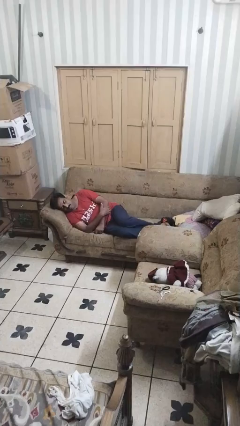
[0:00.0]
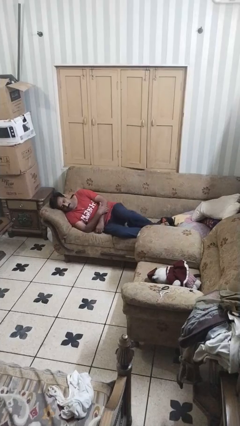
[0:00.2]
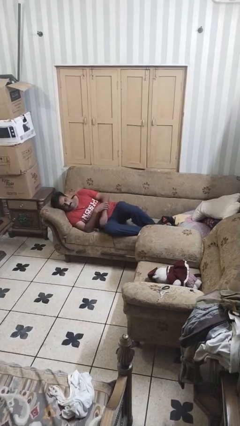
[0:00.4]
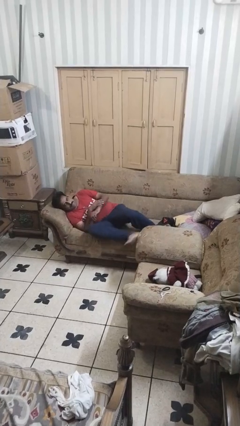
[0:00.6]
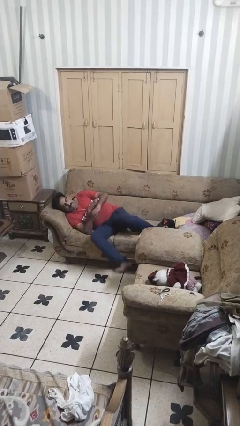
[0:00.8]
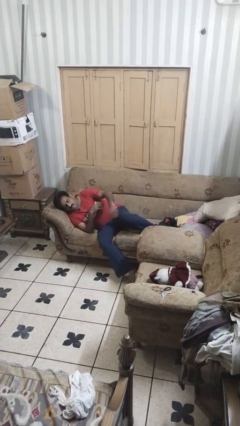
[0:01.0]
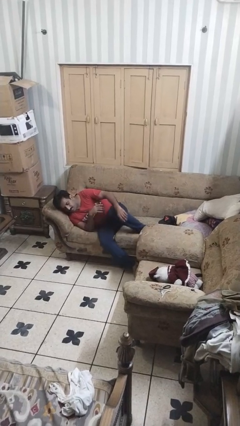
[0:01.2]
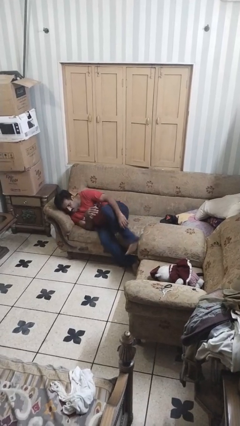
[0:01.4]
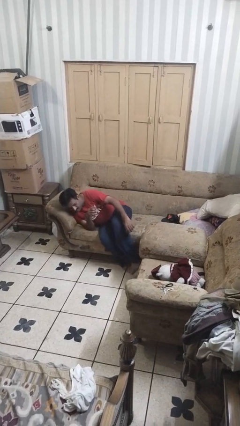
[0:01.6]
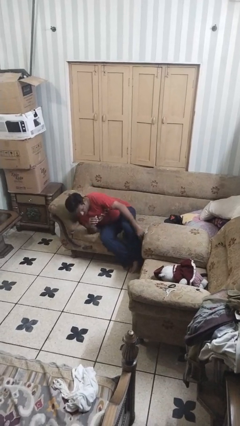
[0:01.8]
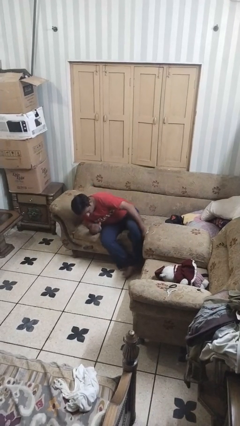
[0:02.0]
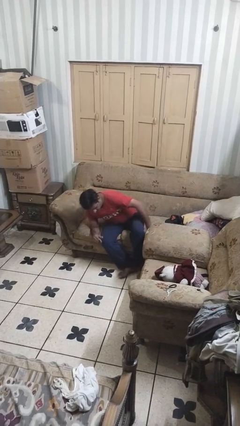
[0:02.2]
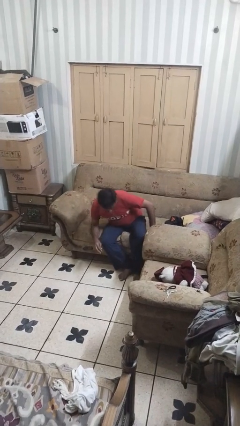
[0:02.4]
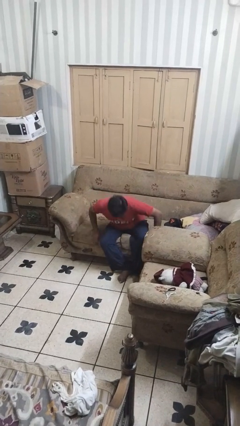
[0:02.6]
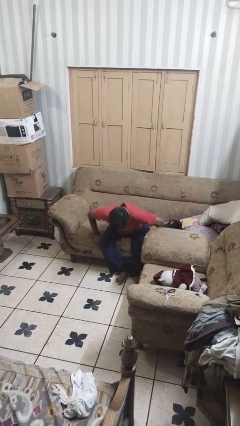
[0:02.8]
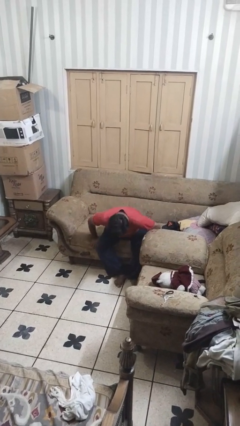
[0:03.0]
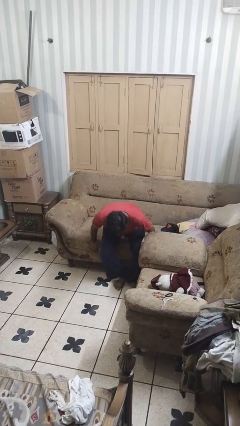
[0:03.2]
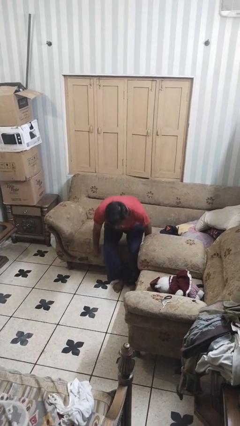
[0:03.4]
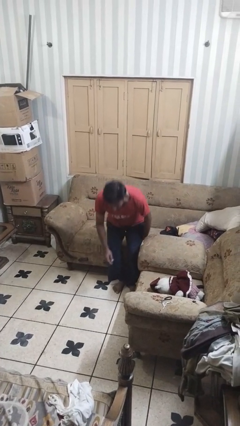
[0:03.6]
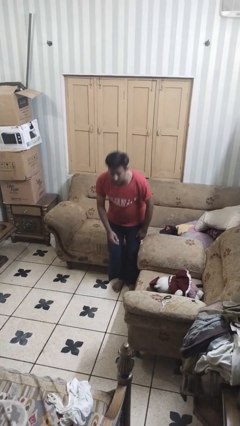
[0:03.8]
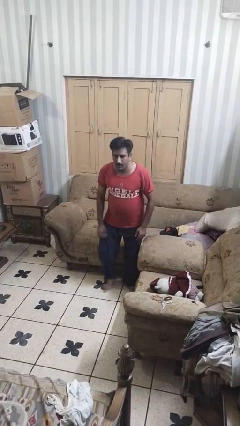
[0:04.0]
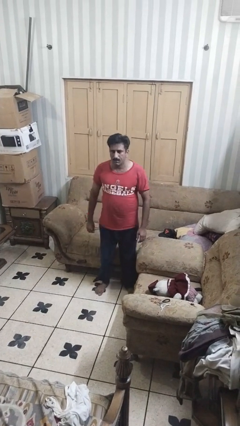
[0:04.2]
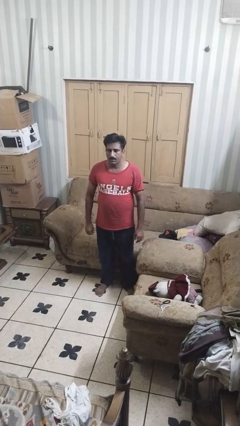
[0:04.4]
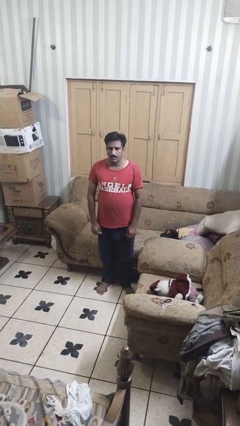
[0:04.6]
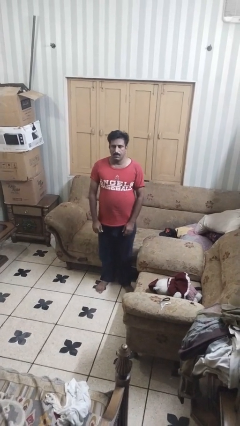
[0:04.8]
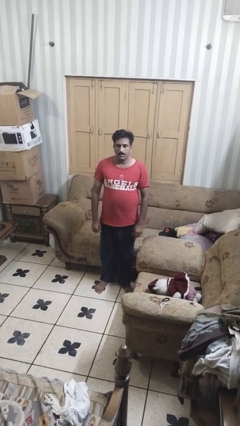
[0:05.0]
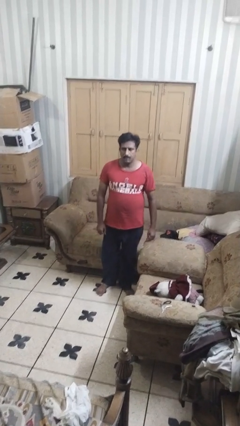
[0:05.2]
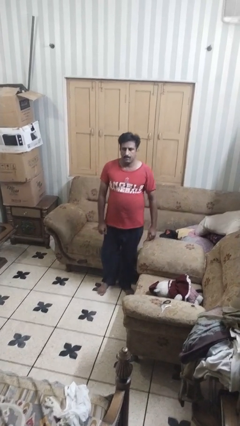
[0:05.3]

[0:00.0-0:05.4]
person stands up

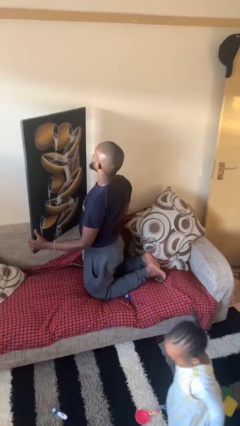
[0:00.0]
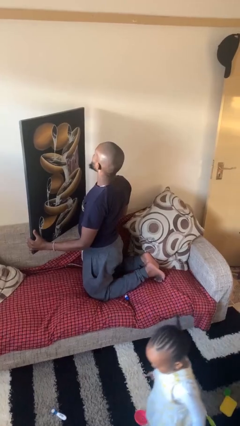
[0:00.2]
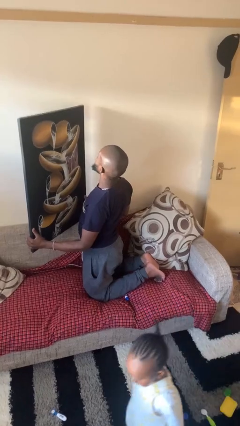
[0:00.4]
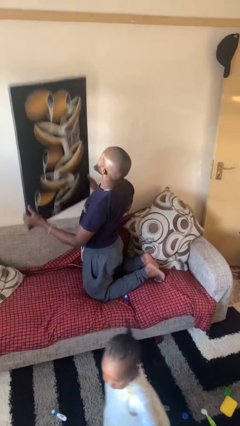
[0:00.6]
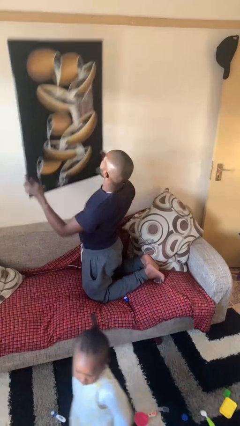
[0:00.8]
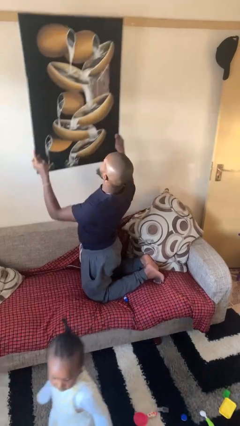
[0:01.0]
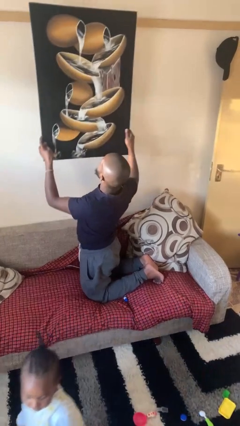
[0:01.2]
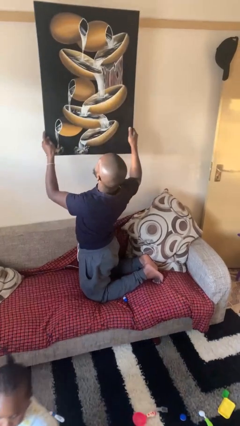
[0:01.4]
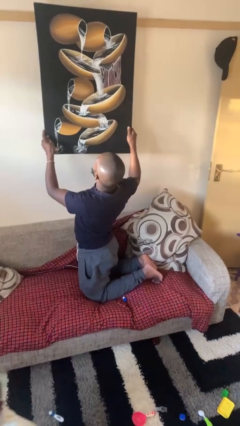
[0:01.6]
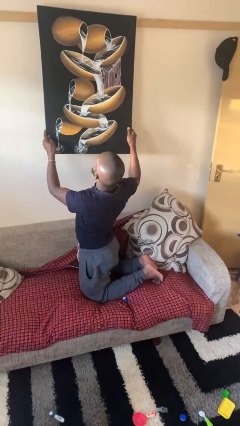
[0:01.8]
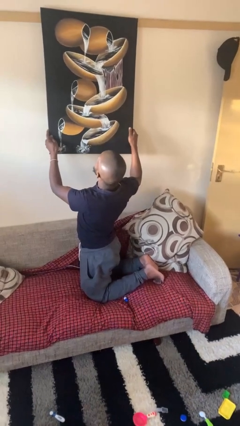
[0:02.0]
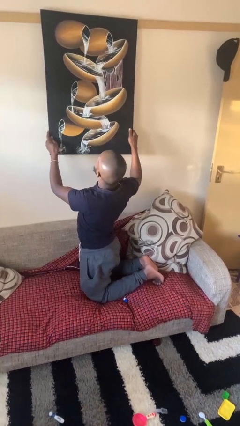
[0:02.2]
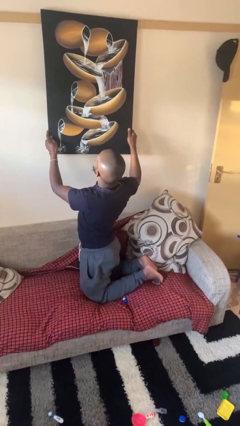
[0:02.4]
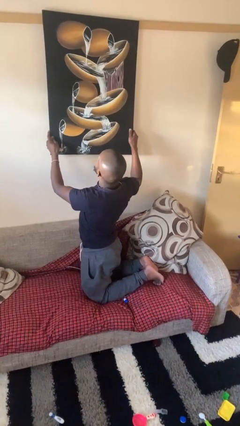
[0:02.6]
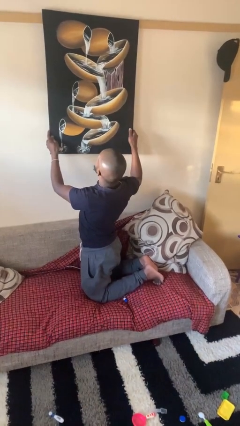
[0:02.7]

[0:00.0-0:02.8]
person puts up picture frame

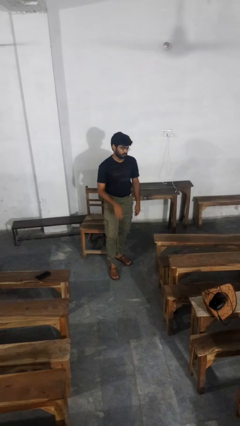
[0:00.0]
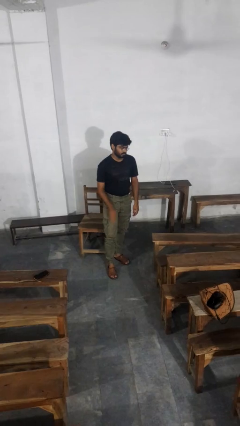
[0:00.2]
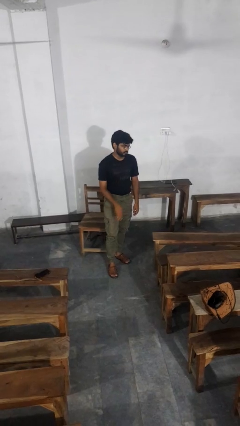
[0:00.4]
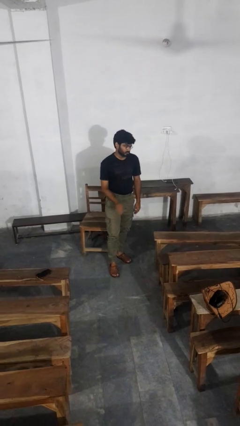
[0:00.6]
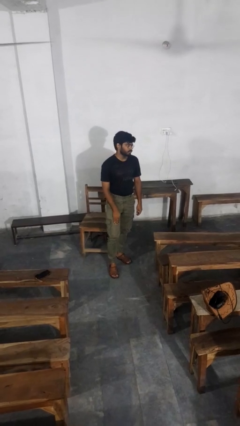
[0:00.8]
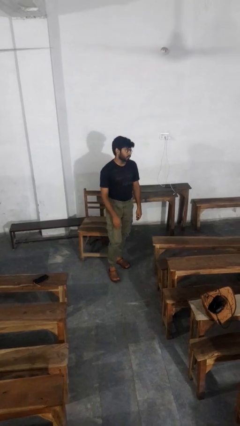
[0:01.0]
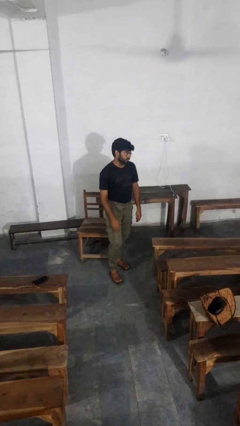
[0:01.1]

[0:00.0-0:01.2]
person slaps hands on thighs

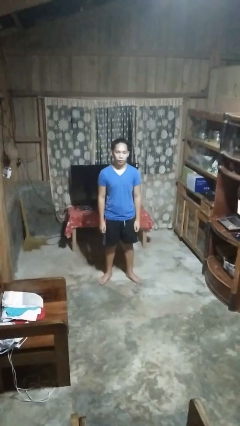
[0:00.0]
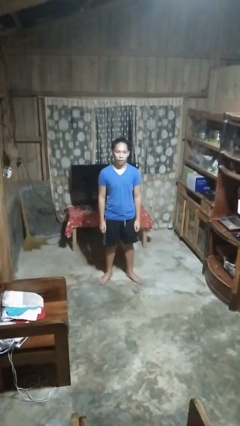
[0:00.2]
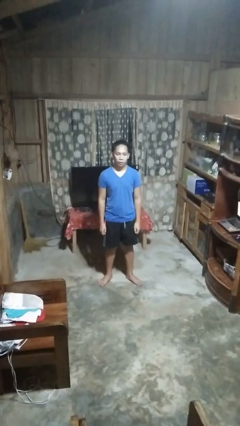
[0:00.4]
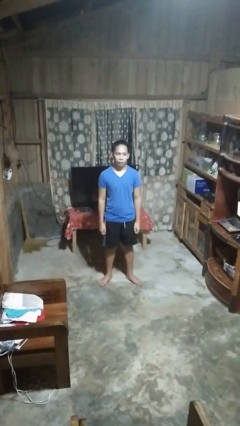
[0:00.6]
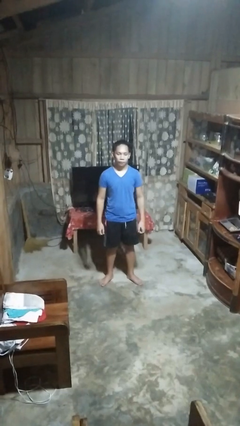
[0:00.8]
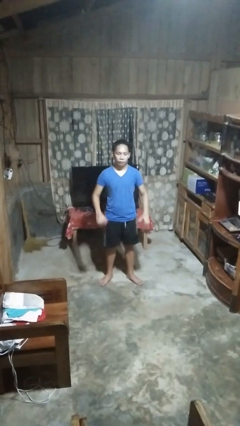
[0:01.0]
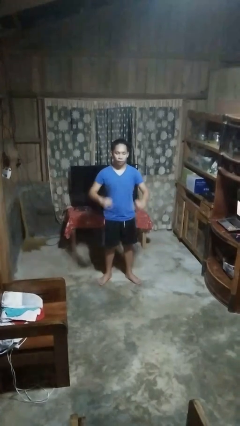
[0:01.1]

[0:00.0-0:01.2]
person gestures heart

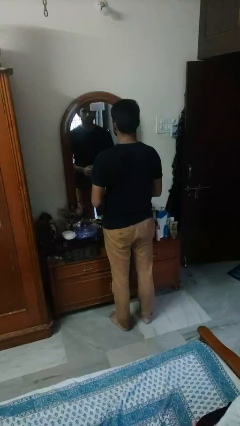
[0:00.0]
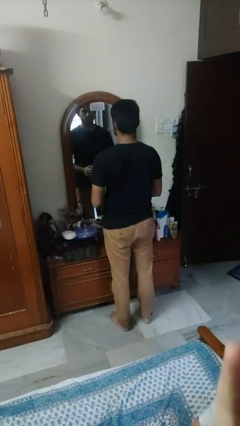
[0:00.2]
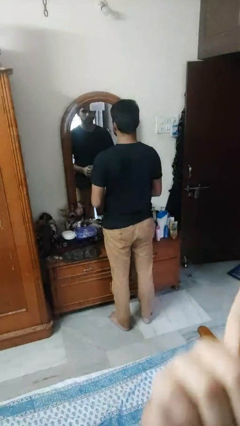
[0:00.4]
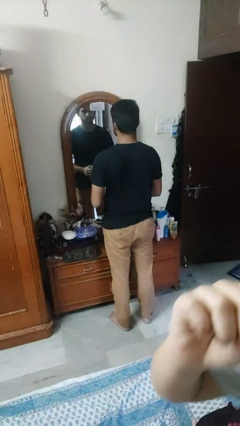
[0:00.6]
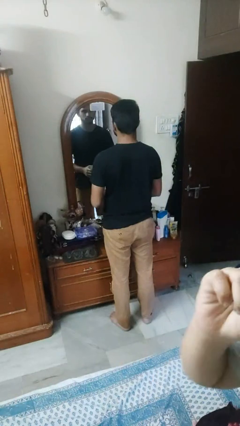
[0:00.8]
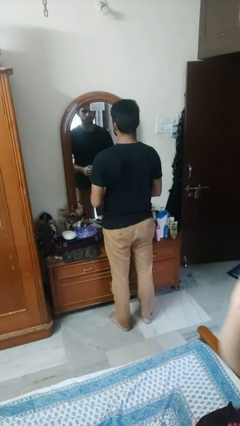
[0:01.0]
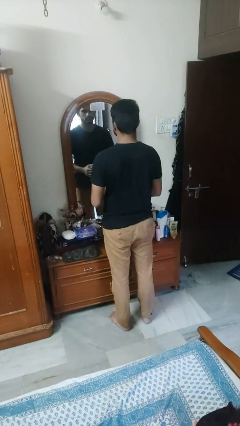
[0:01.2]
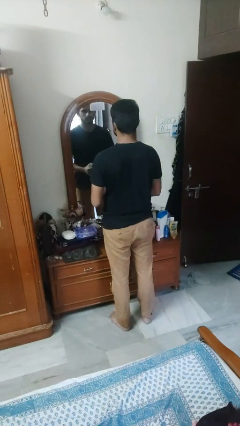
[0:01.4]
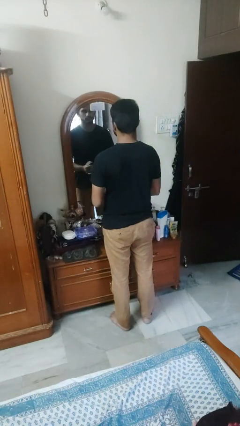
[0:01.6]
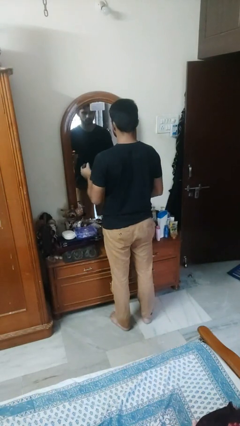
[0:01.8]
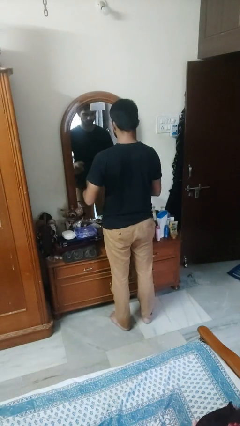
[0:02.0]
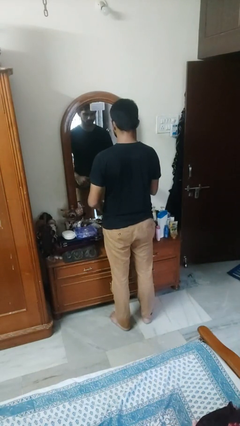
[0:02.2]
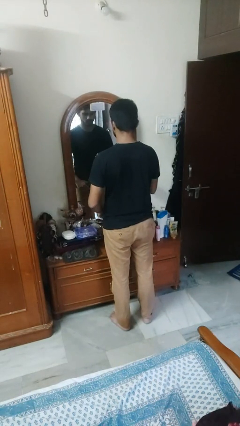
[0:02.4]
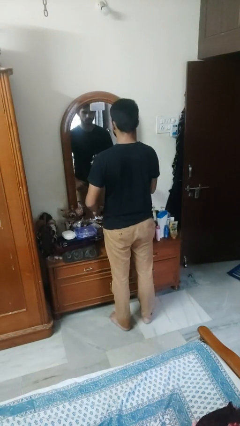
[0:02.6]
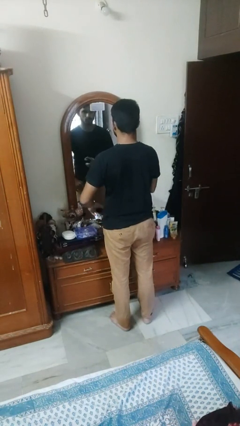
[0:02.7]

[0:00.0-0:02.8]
person applies deodorant

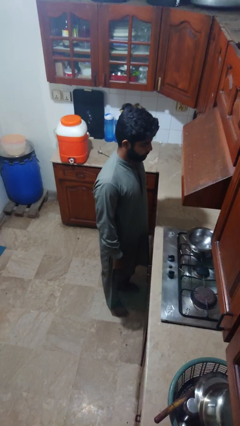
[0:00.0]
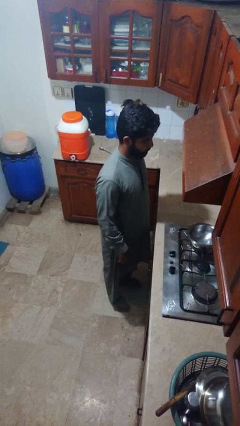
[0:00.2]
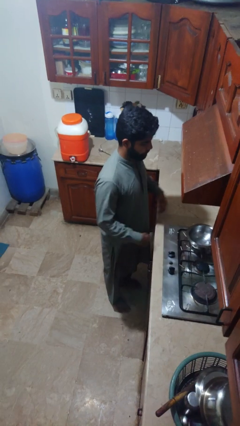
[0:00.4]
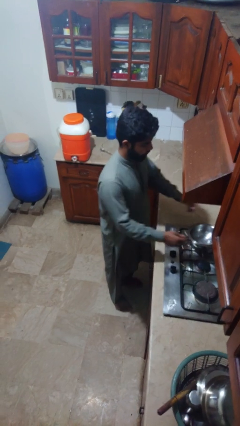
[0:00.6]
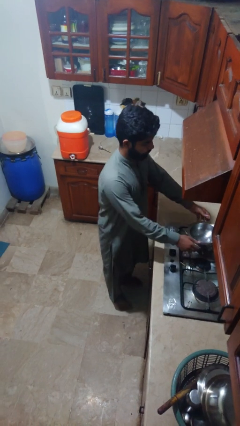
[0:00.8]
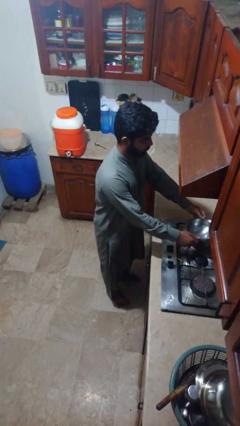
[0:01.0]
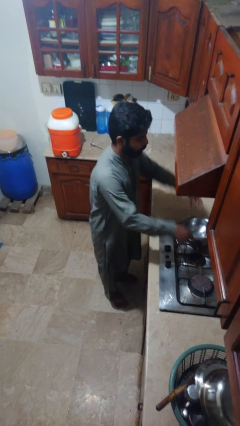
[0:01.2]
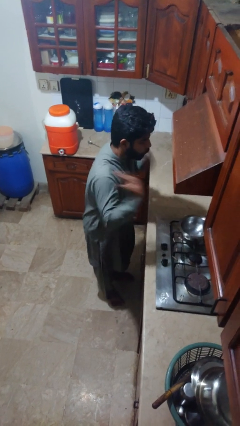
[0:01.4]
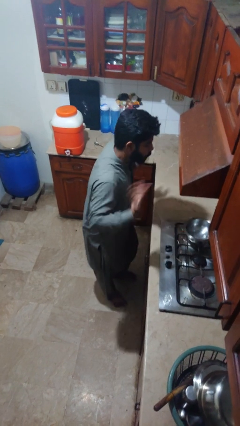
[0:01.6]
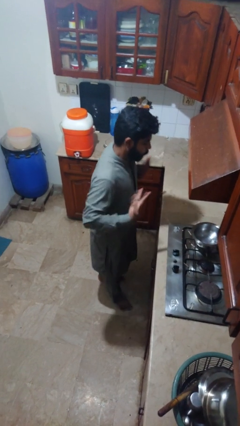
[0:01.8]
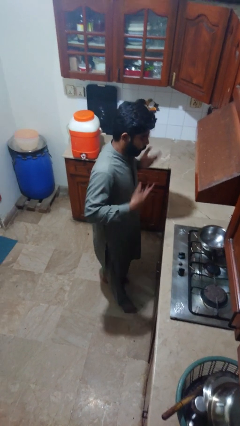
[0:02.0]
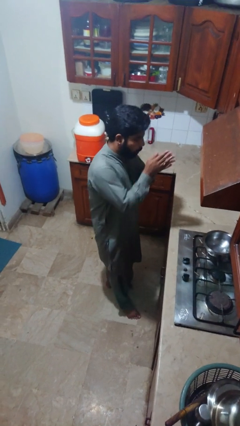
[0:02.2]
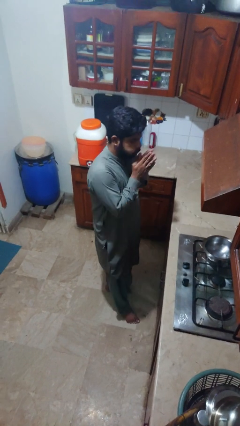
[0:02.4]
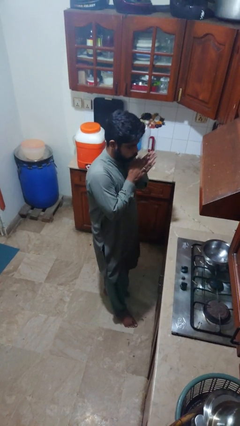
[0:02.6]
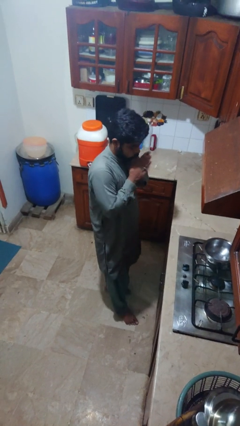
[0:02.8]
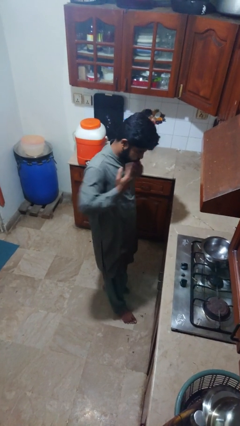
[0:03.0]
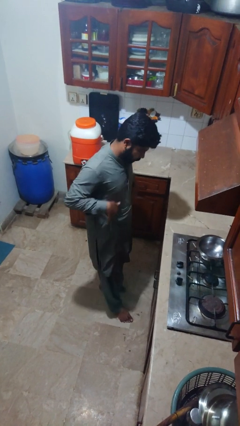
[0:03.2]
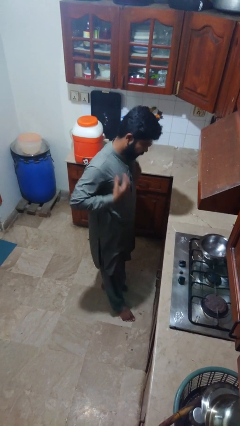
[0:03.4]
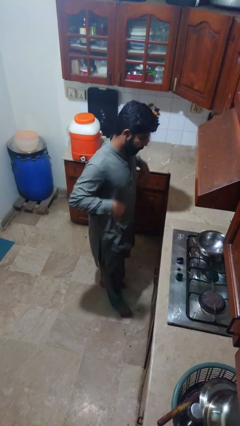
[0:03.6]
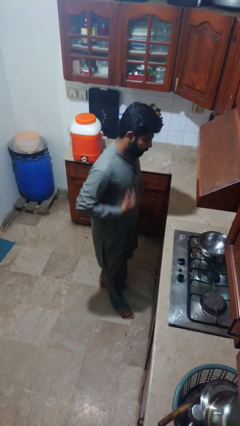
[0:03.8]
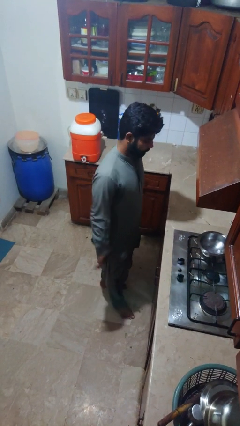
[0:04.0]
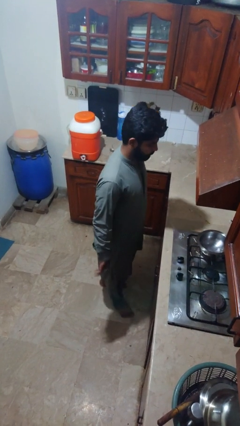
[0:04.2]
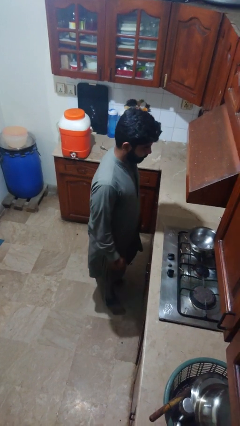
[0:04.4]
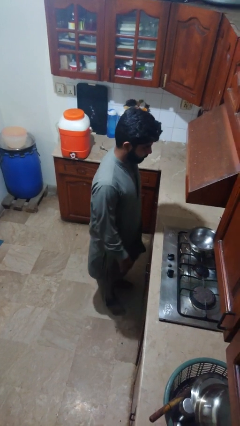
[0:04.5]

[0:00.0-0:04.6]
person burns hand
